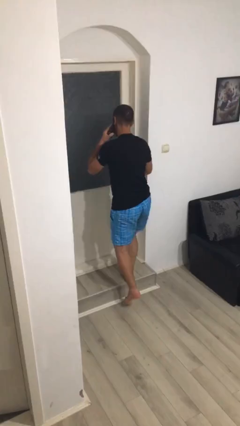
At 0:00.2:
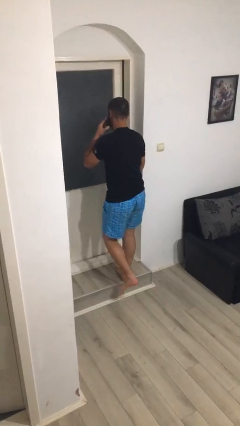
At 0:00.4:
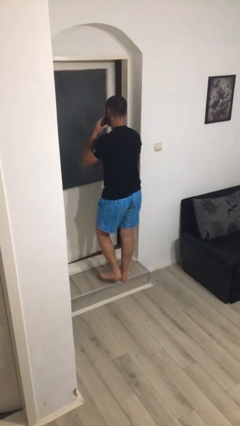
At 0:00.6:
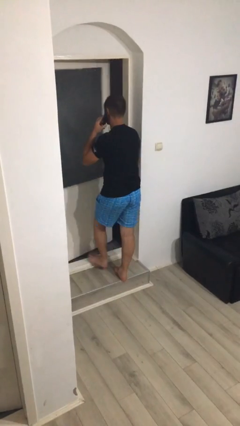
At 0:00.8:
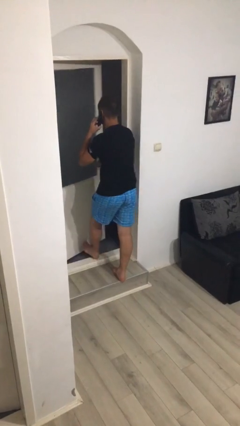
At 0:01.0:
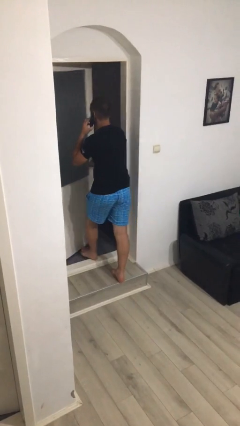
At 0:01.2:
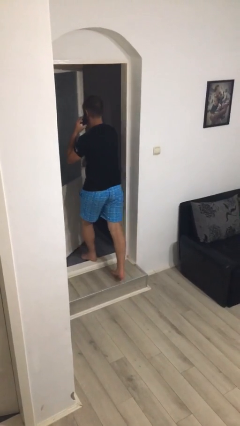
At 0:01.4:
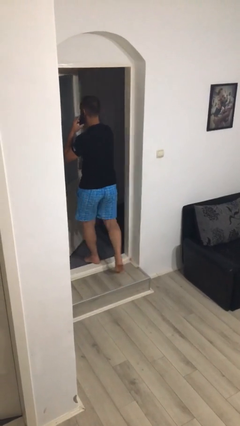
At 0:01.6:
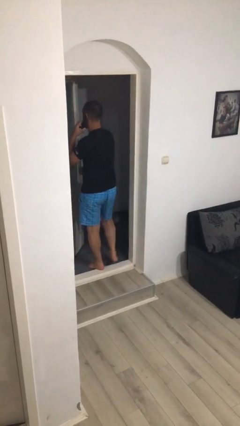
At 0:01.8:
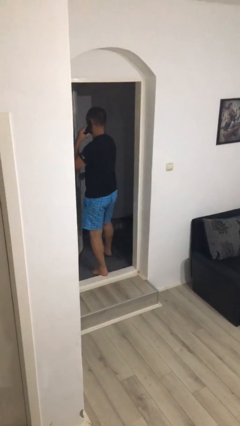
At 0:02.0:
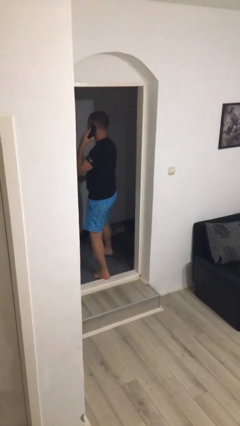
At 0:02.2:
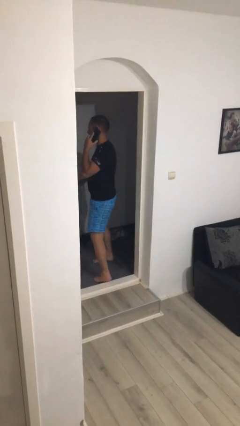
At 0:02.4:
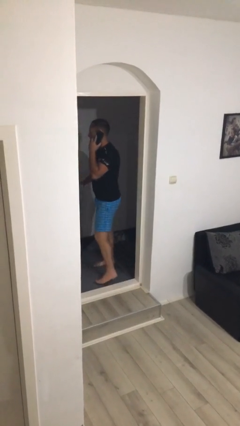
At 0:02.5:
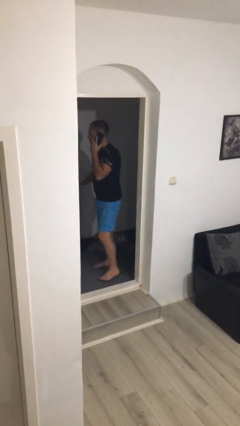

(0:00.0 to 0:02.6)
person opens facility door

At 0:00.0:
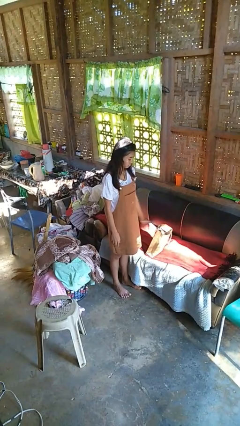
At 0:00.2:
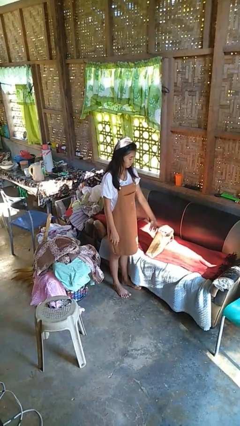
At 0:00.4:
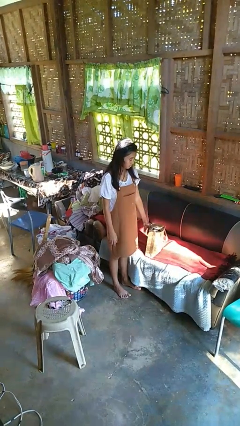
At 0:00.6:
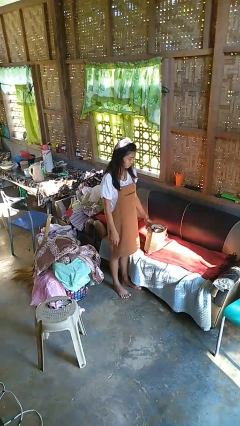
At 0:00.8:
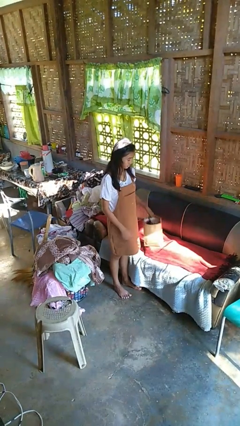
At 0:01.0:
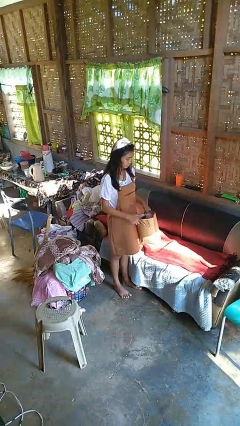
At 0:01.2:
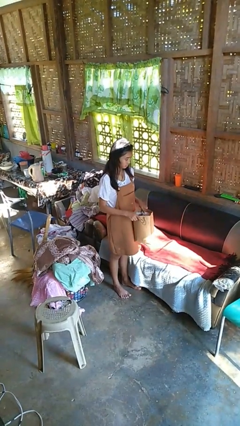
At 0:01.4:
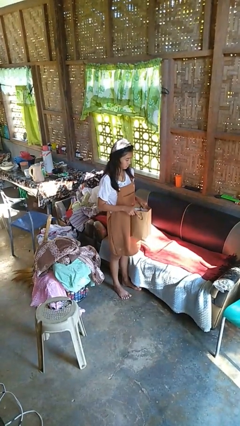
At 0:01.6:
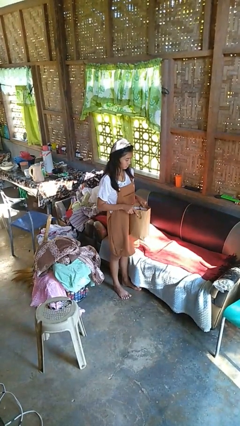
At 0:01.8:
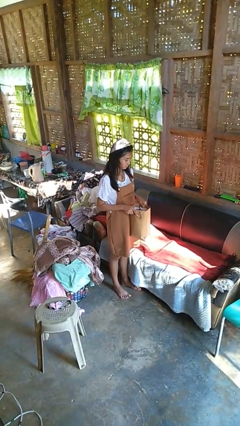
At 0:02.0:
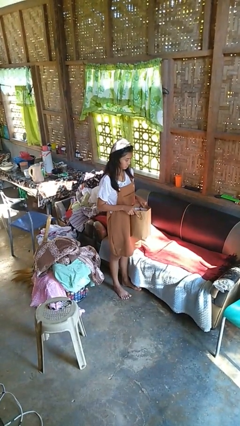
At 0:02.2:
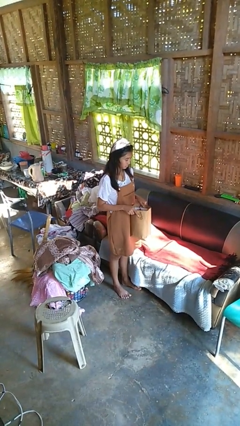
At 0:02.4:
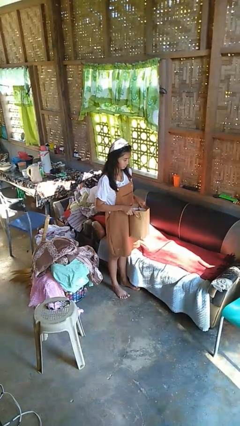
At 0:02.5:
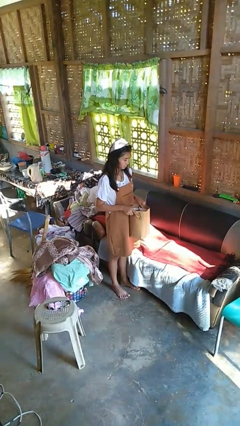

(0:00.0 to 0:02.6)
person picks up object from couch

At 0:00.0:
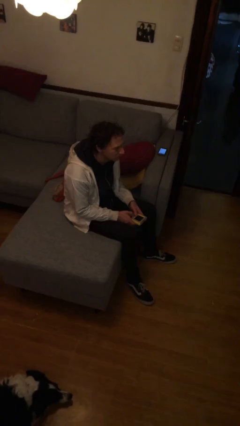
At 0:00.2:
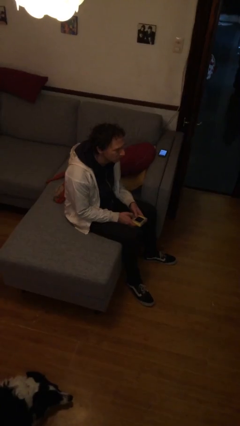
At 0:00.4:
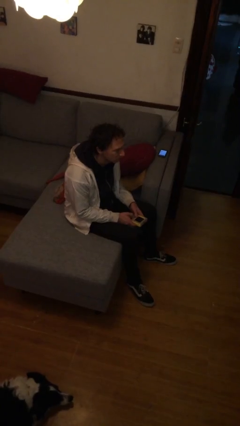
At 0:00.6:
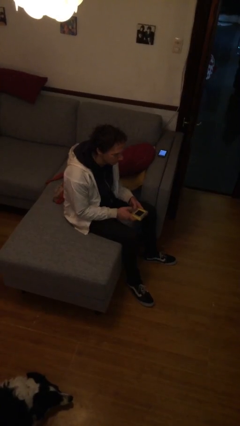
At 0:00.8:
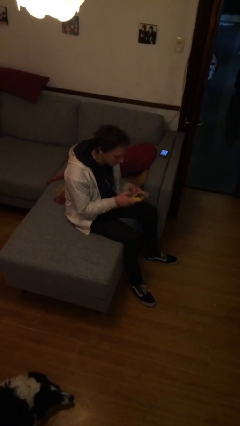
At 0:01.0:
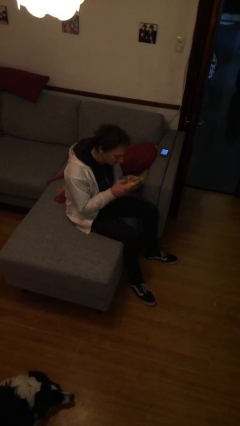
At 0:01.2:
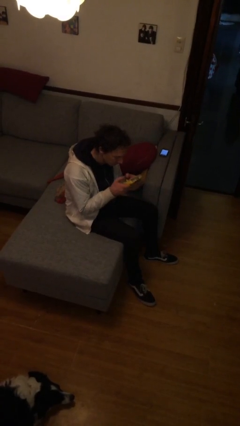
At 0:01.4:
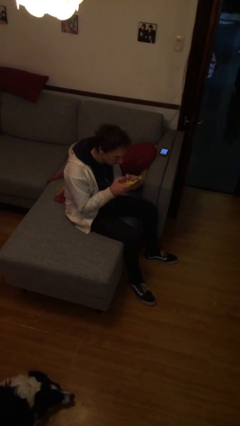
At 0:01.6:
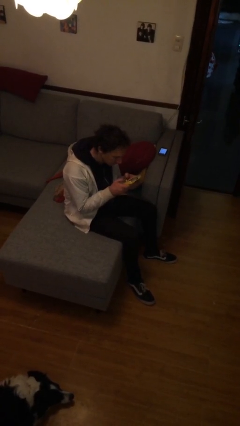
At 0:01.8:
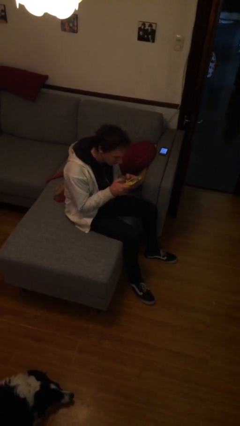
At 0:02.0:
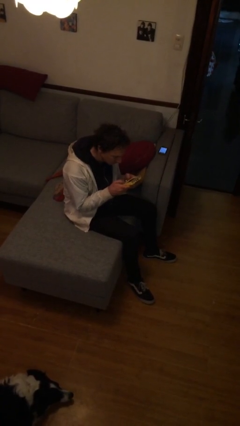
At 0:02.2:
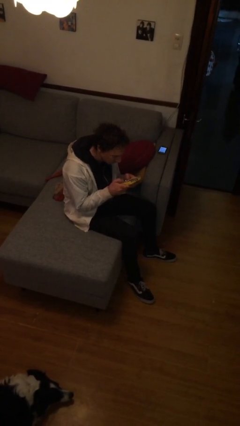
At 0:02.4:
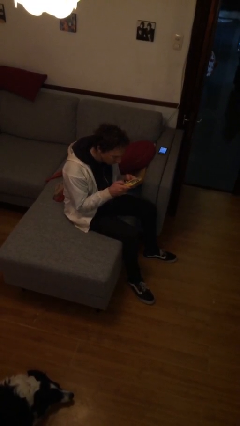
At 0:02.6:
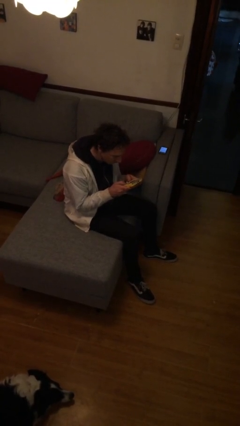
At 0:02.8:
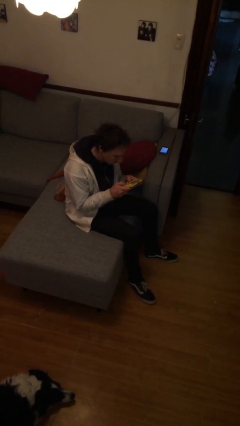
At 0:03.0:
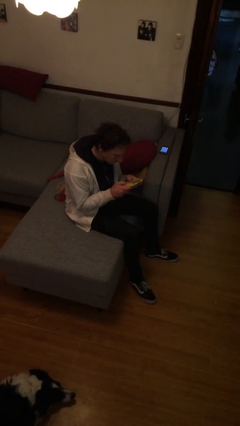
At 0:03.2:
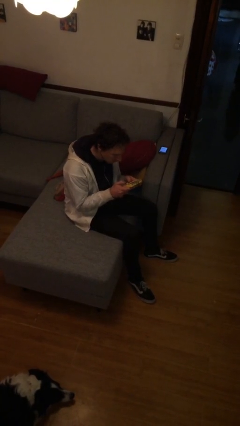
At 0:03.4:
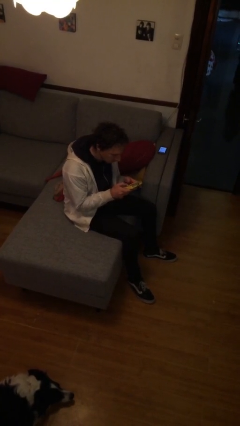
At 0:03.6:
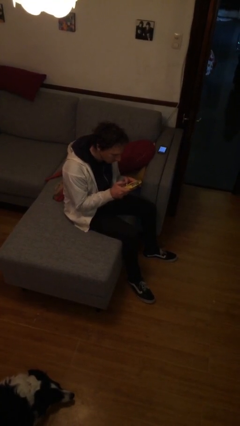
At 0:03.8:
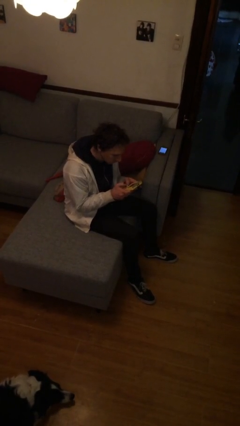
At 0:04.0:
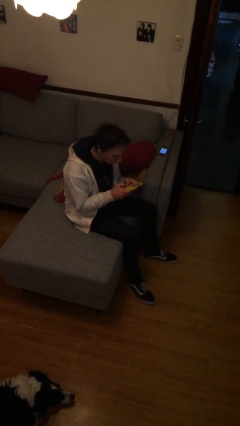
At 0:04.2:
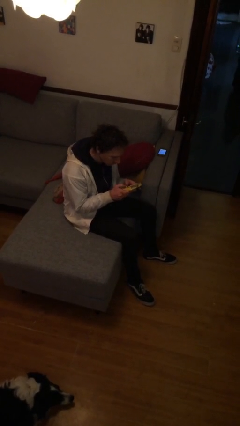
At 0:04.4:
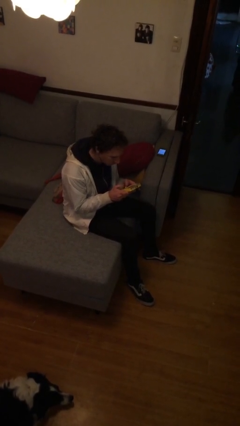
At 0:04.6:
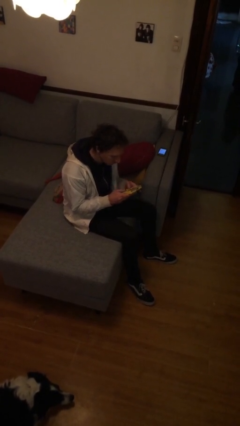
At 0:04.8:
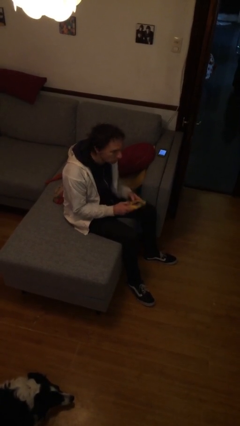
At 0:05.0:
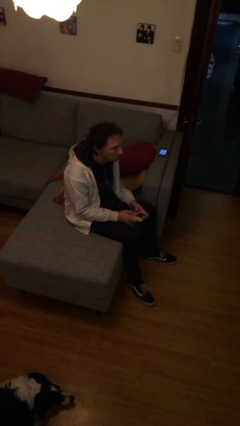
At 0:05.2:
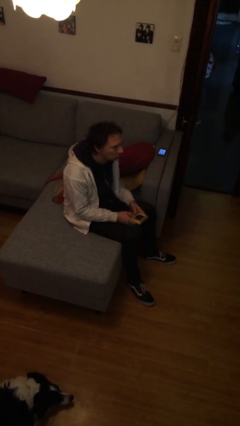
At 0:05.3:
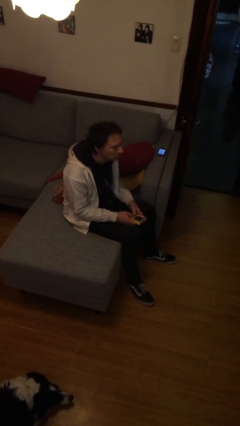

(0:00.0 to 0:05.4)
person interacts with handheld game

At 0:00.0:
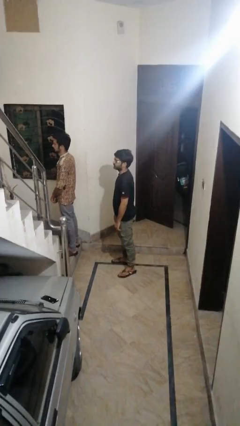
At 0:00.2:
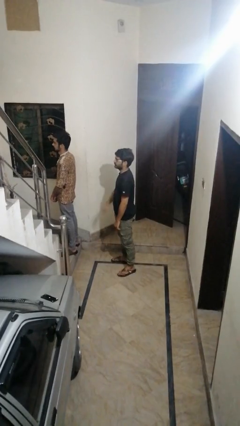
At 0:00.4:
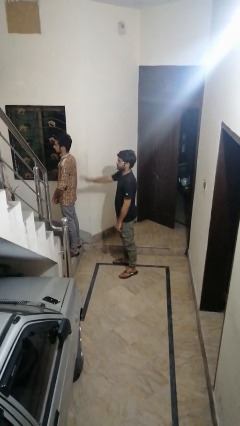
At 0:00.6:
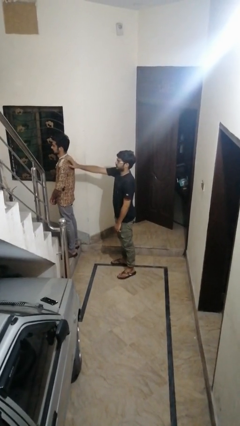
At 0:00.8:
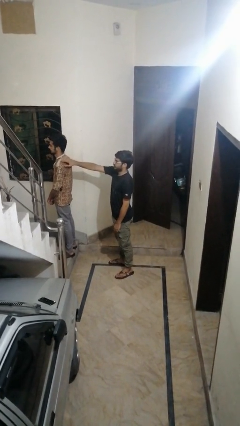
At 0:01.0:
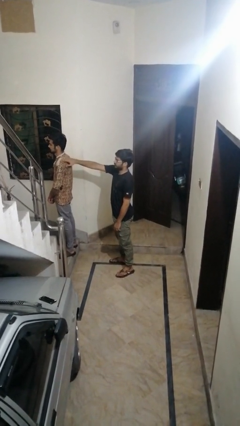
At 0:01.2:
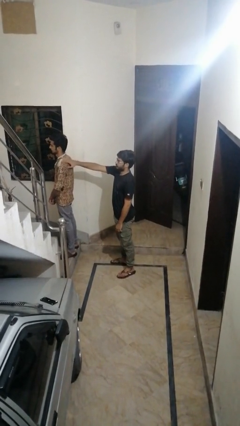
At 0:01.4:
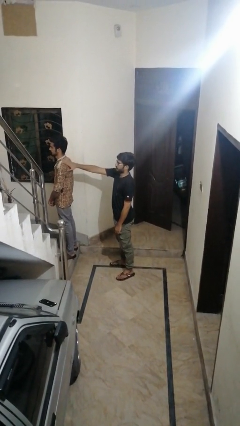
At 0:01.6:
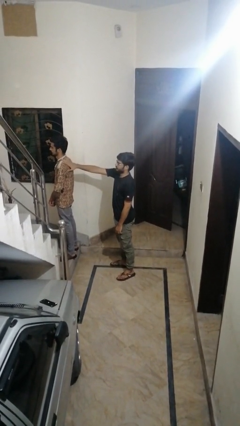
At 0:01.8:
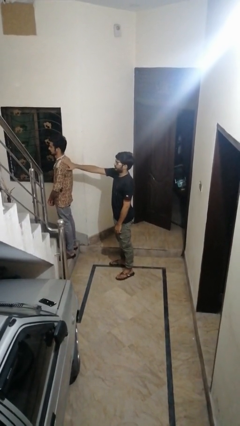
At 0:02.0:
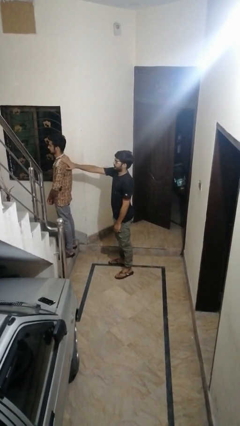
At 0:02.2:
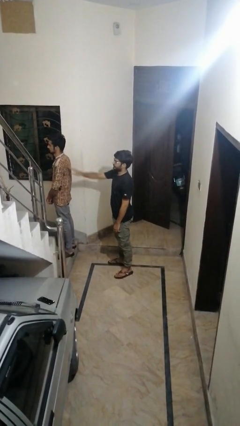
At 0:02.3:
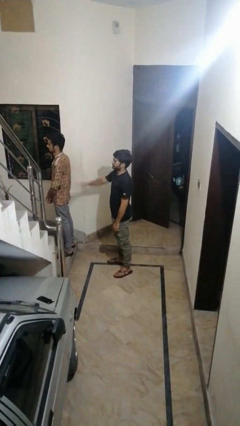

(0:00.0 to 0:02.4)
person touches back of person

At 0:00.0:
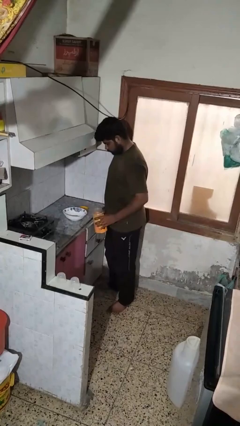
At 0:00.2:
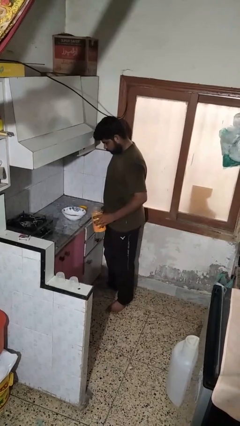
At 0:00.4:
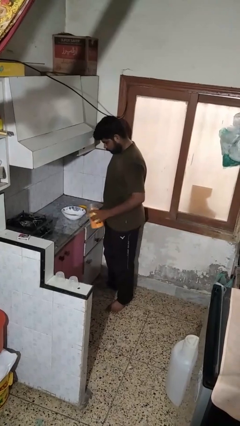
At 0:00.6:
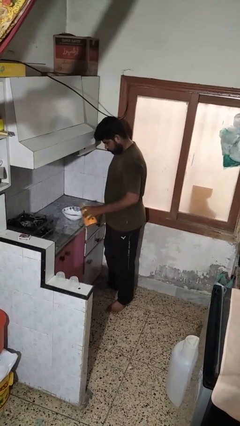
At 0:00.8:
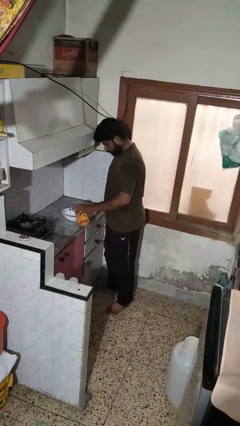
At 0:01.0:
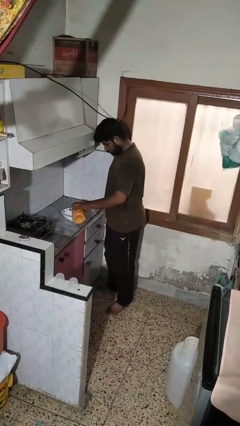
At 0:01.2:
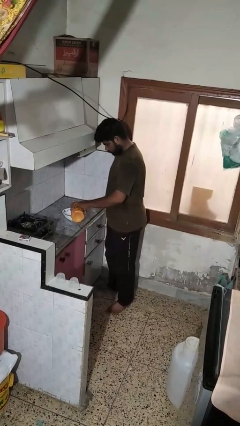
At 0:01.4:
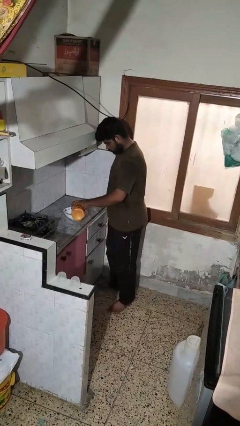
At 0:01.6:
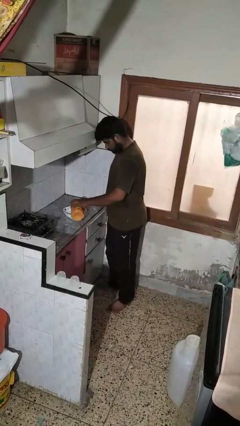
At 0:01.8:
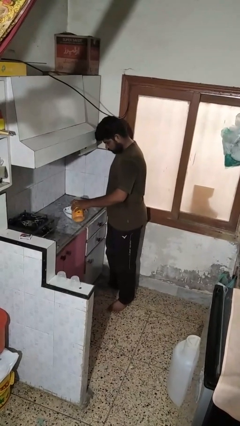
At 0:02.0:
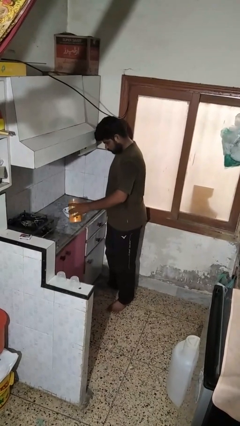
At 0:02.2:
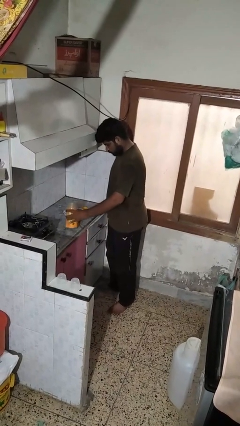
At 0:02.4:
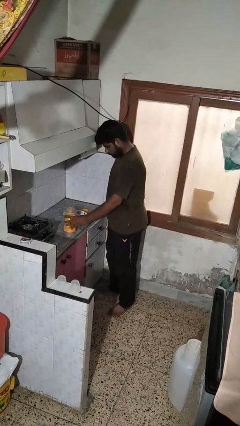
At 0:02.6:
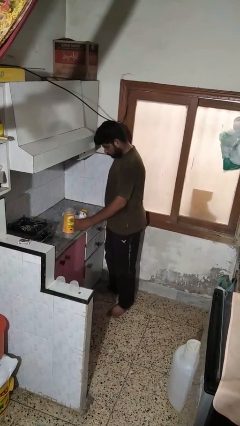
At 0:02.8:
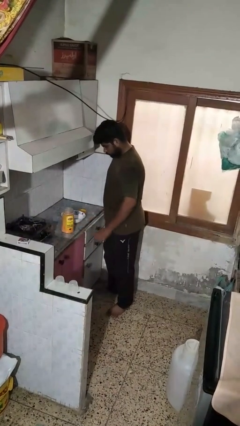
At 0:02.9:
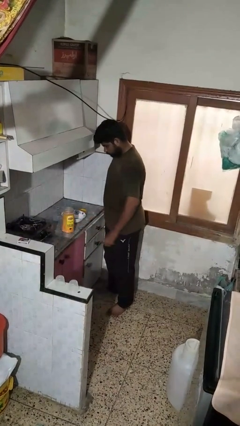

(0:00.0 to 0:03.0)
person pours into bowl

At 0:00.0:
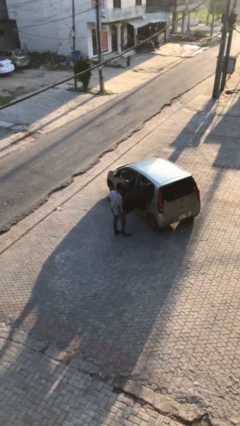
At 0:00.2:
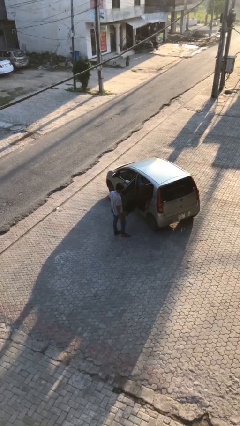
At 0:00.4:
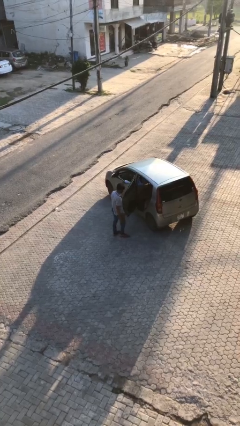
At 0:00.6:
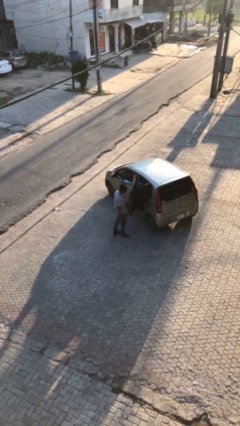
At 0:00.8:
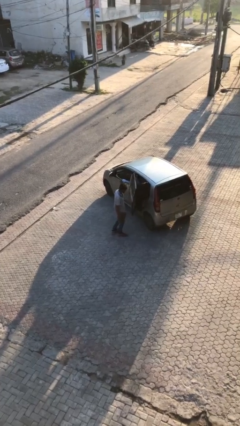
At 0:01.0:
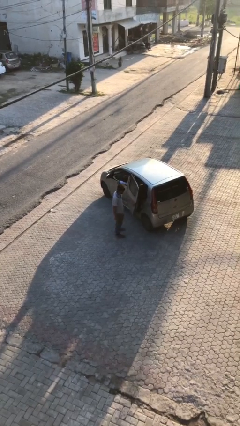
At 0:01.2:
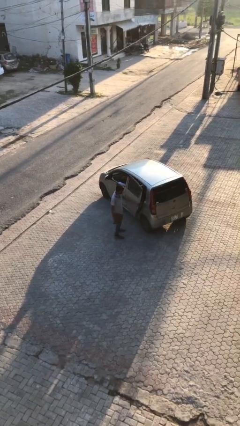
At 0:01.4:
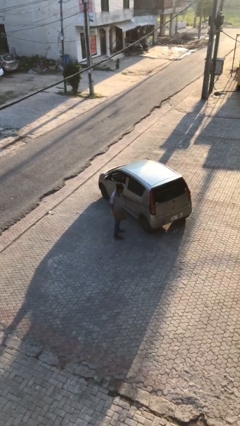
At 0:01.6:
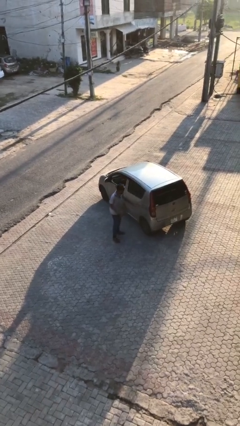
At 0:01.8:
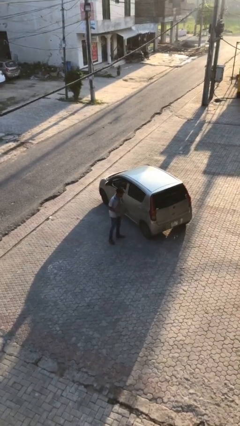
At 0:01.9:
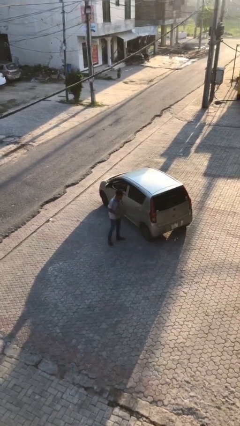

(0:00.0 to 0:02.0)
person closes car door
